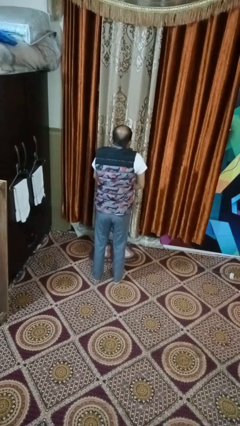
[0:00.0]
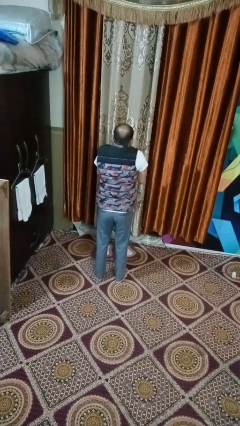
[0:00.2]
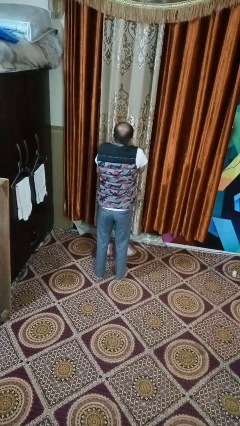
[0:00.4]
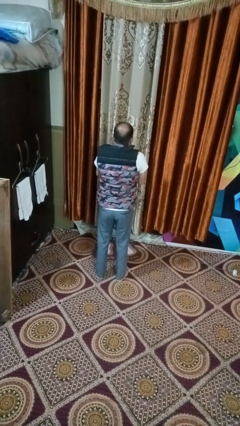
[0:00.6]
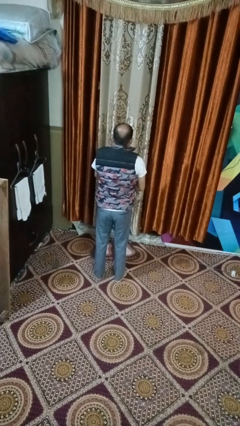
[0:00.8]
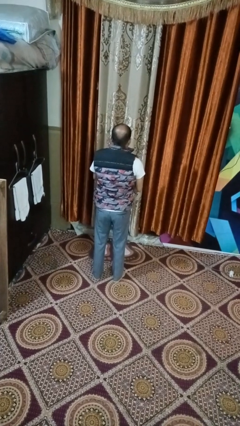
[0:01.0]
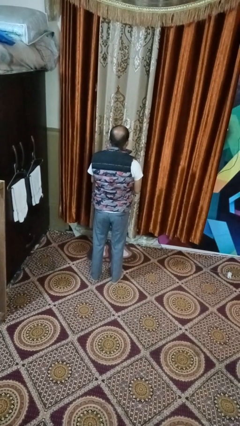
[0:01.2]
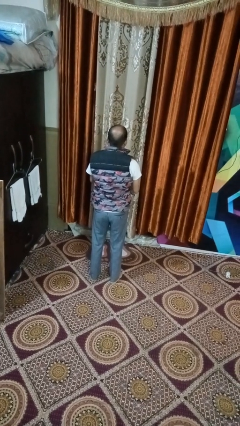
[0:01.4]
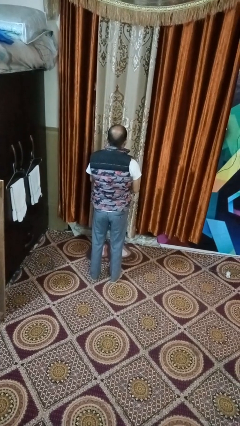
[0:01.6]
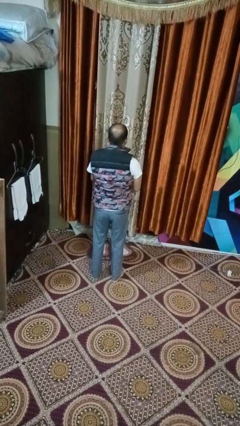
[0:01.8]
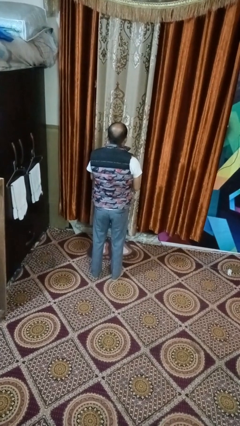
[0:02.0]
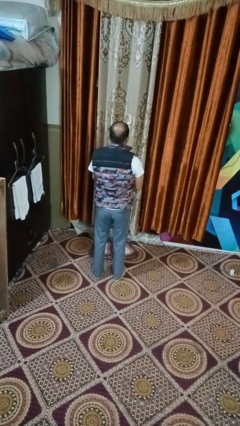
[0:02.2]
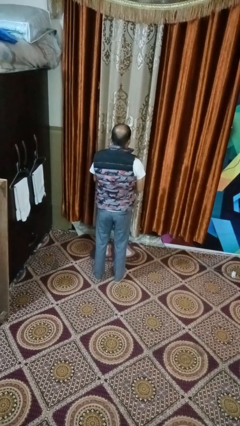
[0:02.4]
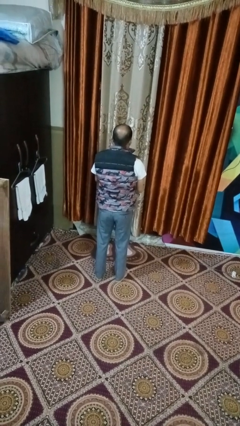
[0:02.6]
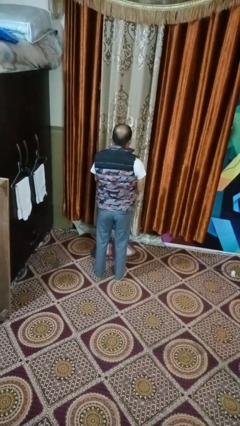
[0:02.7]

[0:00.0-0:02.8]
person zips up jacket

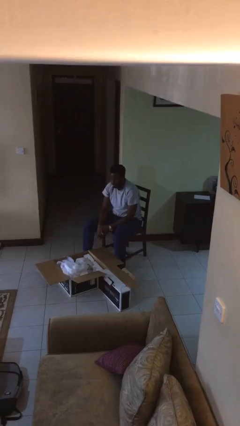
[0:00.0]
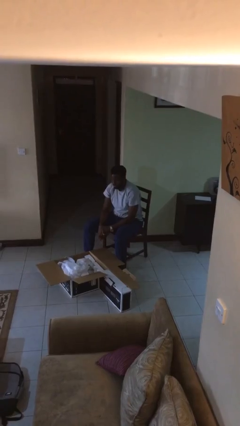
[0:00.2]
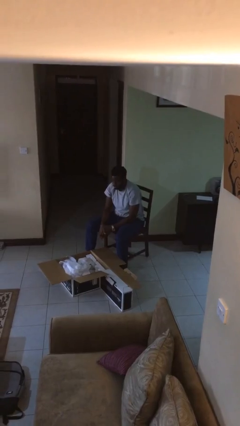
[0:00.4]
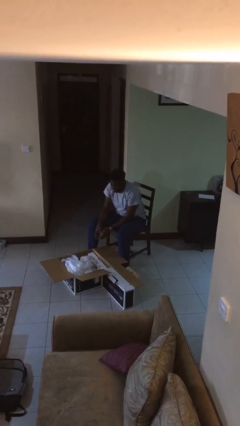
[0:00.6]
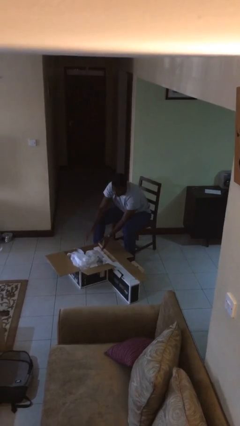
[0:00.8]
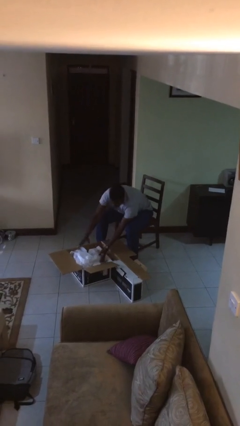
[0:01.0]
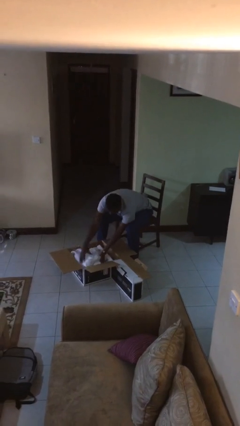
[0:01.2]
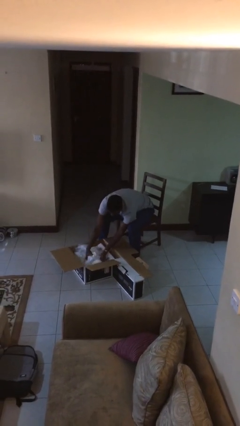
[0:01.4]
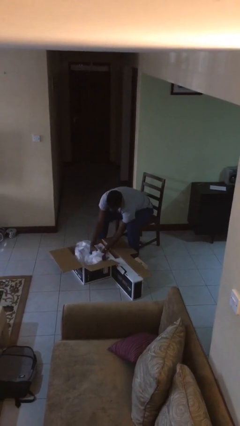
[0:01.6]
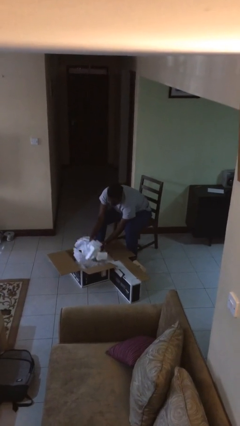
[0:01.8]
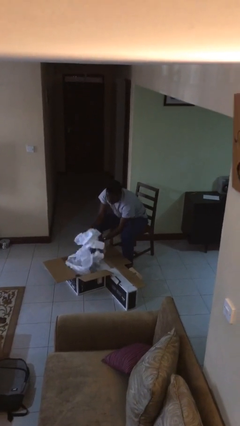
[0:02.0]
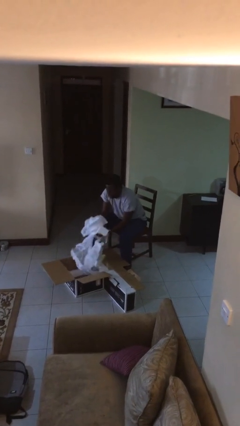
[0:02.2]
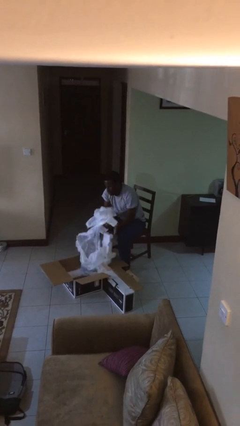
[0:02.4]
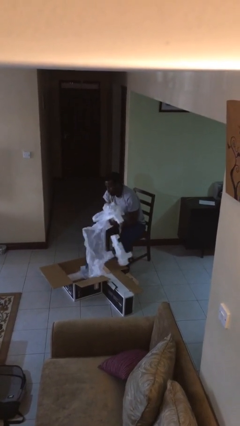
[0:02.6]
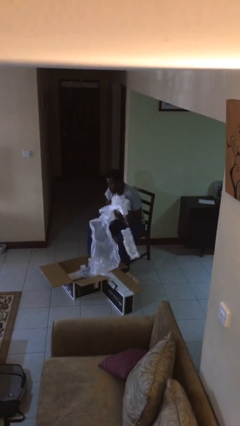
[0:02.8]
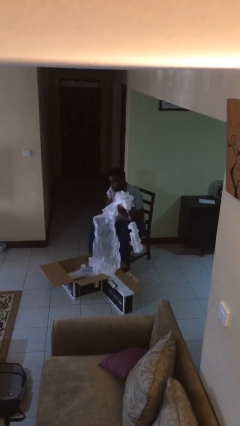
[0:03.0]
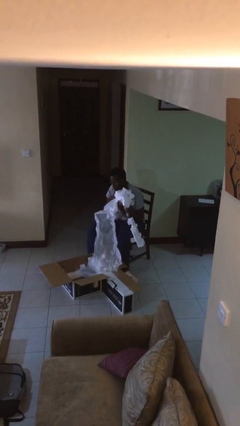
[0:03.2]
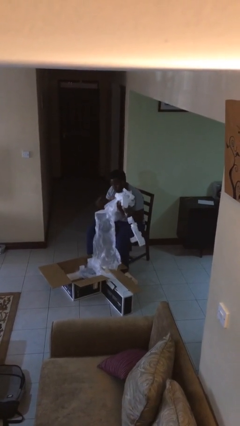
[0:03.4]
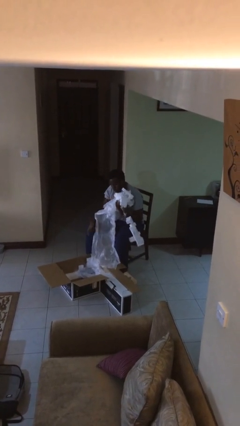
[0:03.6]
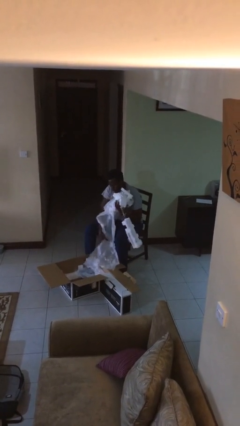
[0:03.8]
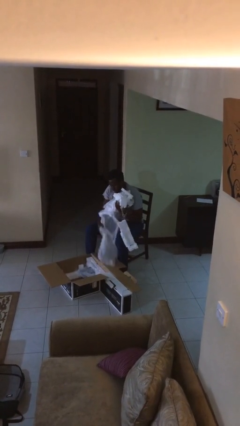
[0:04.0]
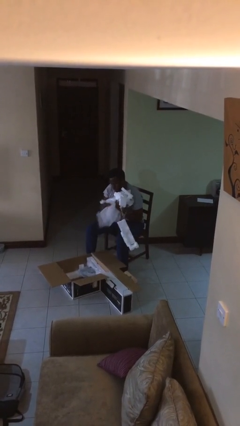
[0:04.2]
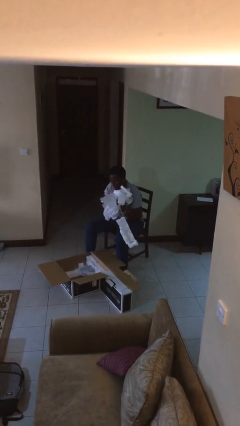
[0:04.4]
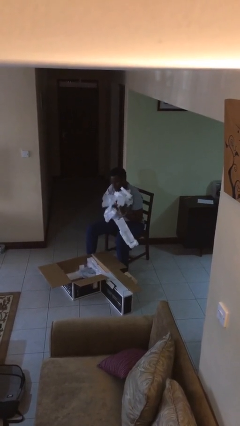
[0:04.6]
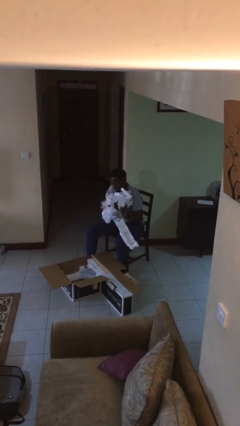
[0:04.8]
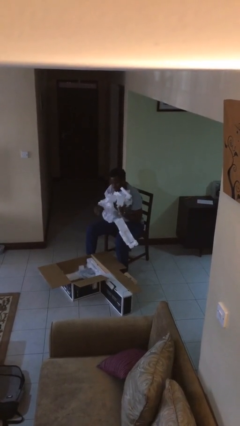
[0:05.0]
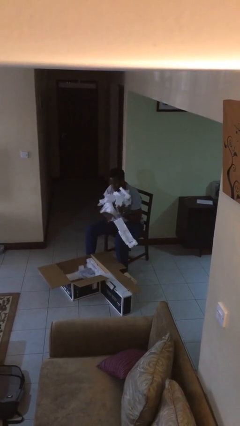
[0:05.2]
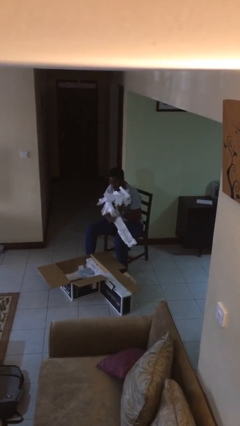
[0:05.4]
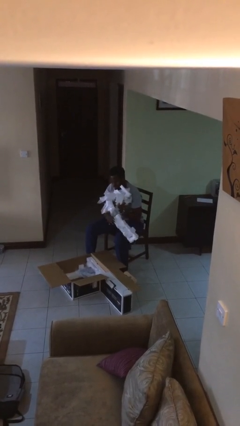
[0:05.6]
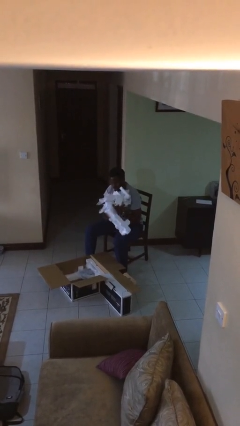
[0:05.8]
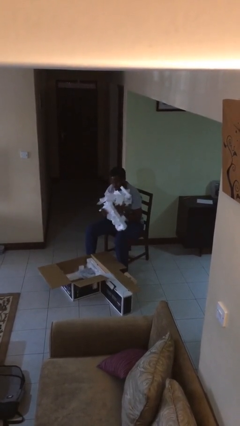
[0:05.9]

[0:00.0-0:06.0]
person takes object from box

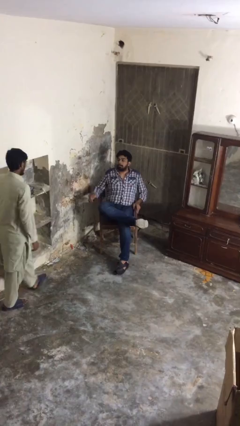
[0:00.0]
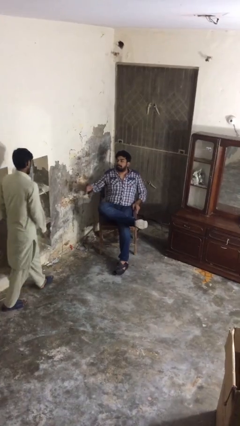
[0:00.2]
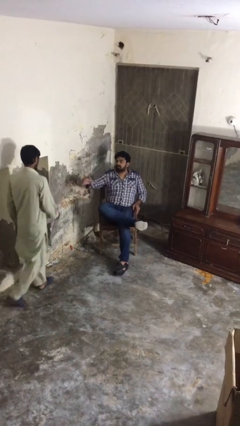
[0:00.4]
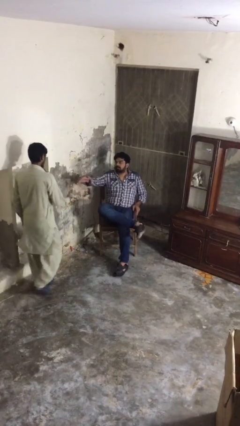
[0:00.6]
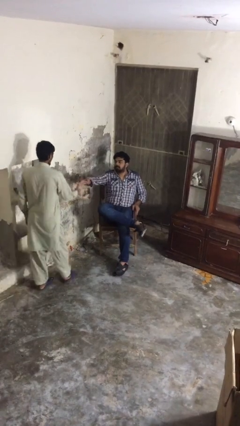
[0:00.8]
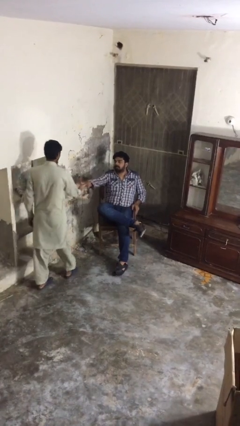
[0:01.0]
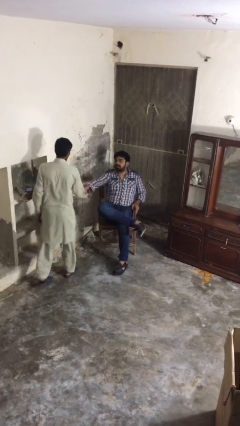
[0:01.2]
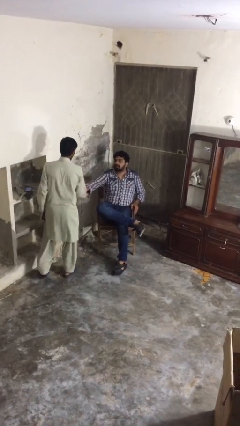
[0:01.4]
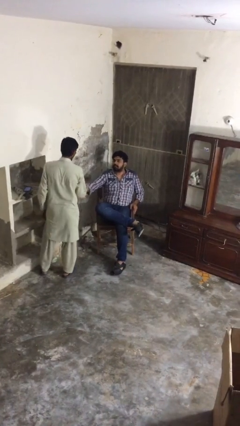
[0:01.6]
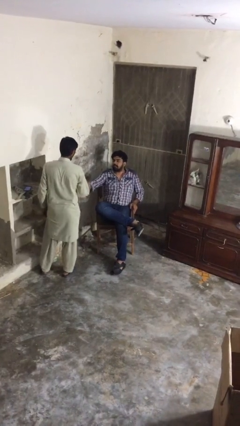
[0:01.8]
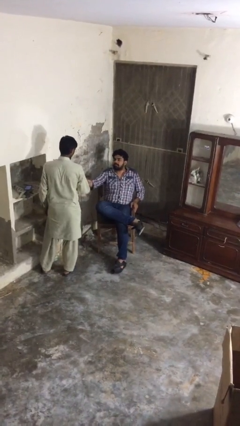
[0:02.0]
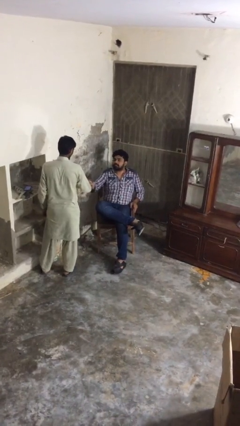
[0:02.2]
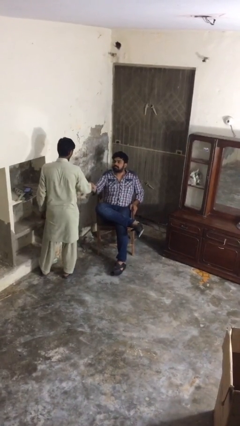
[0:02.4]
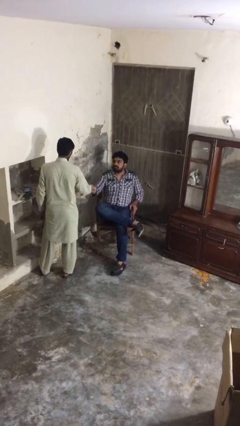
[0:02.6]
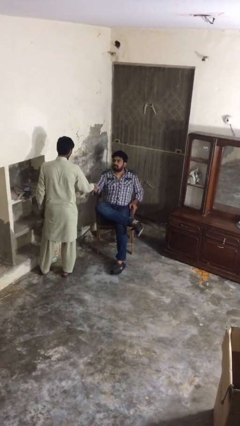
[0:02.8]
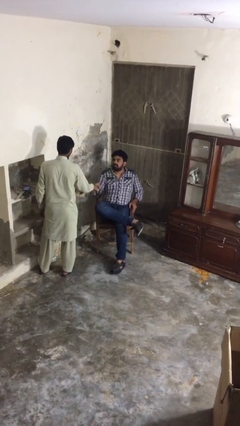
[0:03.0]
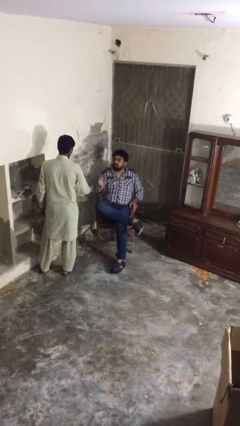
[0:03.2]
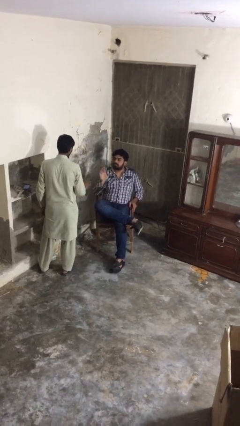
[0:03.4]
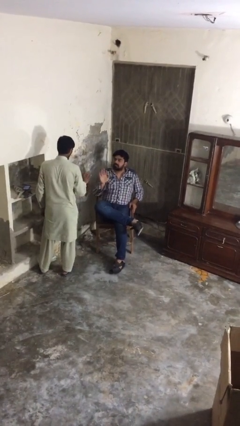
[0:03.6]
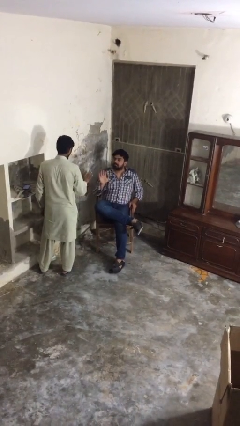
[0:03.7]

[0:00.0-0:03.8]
person shakes hand

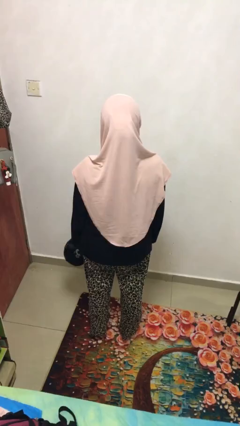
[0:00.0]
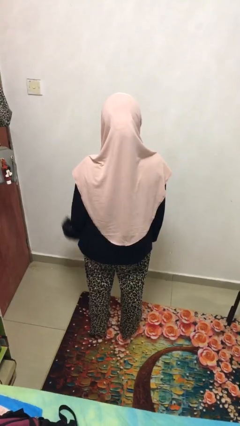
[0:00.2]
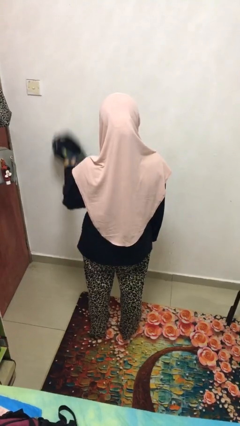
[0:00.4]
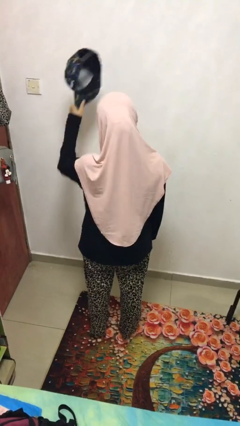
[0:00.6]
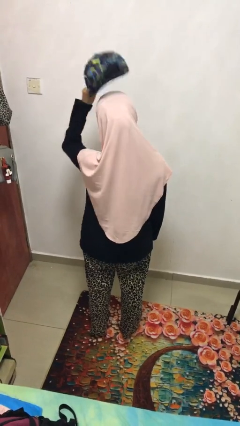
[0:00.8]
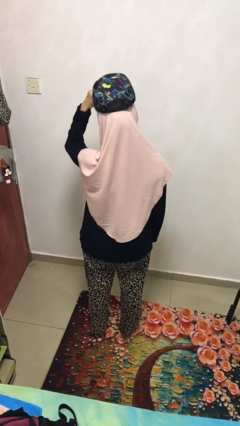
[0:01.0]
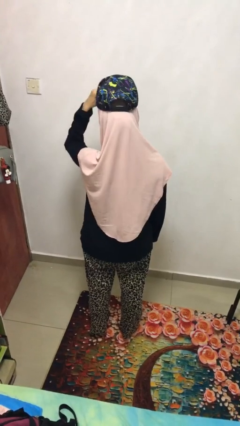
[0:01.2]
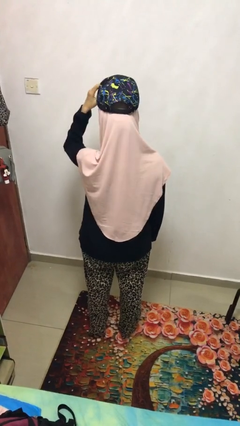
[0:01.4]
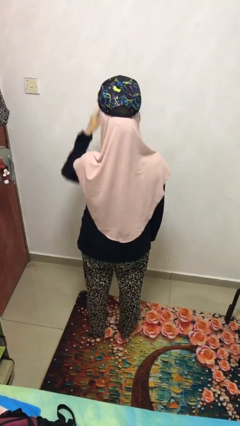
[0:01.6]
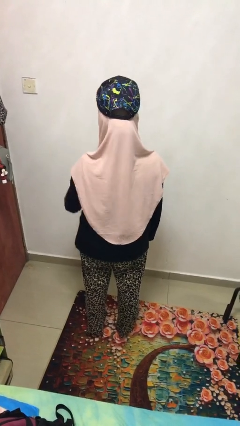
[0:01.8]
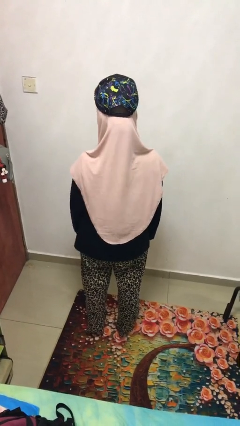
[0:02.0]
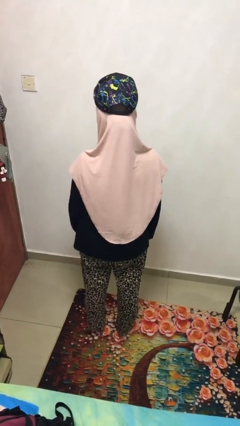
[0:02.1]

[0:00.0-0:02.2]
person puts on hat

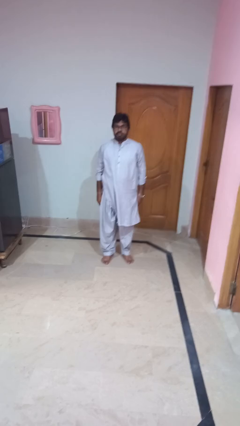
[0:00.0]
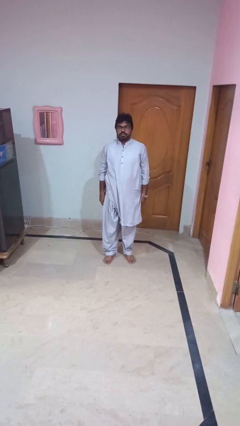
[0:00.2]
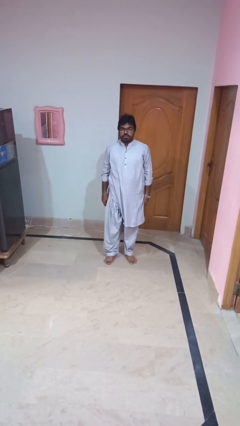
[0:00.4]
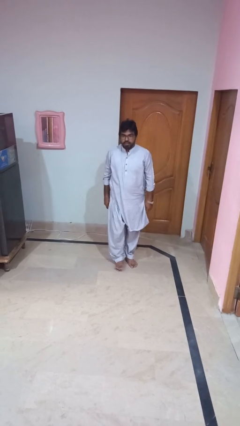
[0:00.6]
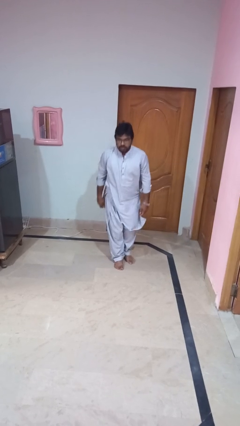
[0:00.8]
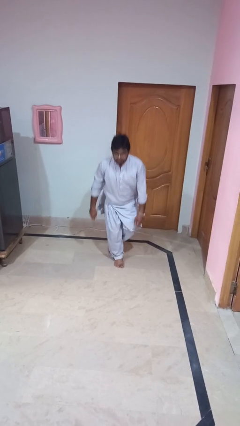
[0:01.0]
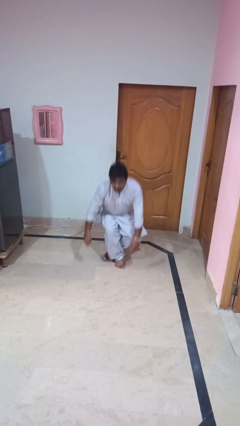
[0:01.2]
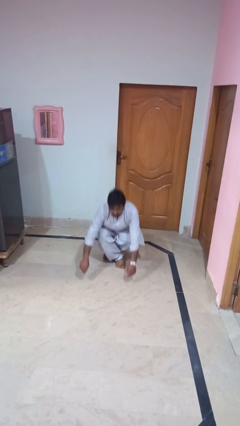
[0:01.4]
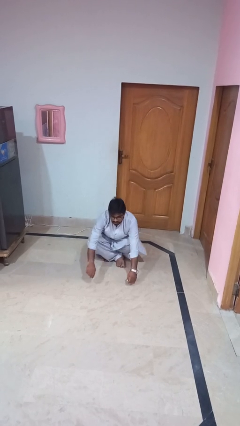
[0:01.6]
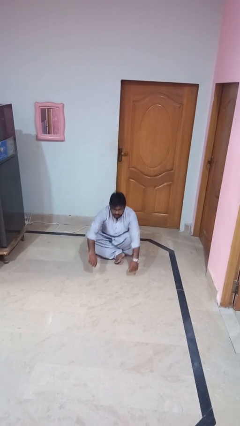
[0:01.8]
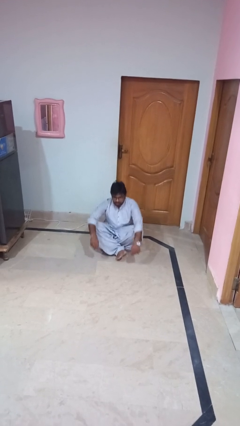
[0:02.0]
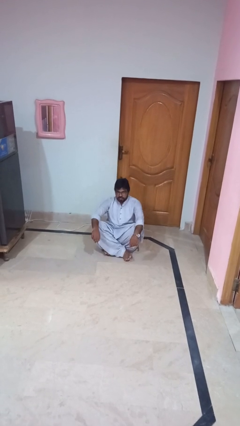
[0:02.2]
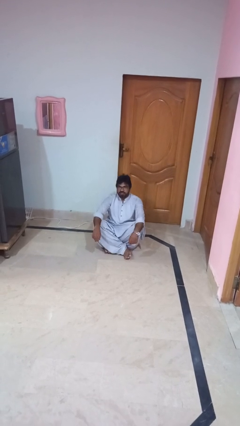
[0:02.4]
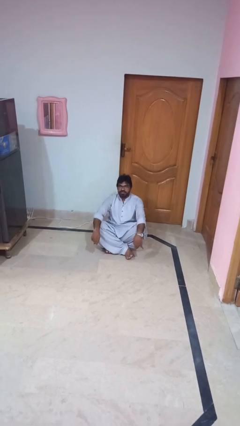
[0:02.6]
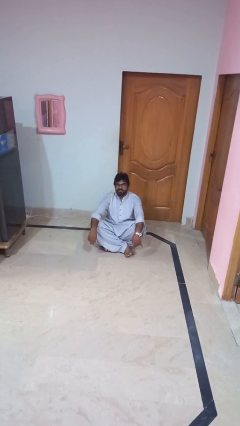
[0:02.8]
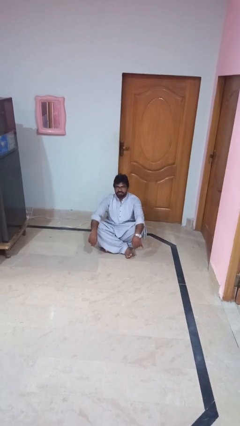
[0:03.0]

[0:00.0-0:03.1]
person sits crisscross
